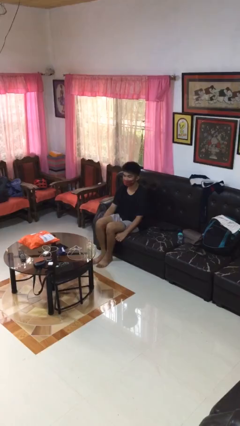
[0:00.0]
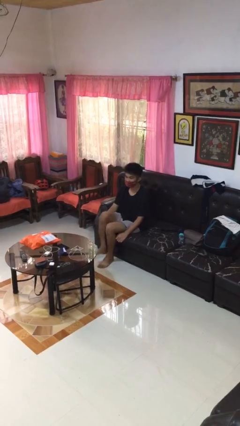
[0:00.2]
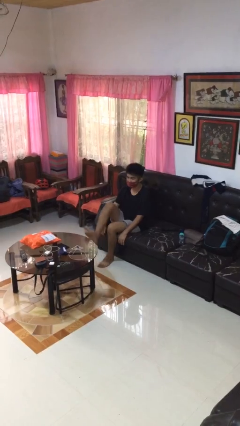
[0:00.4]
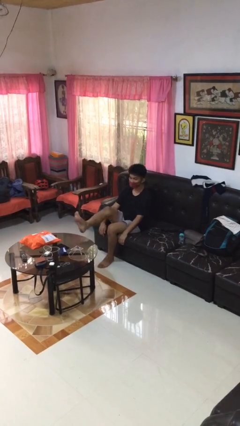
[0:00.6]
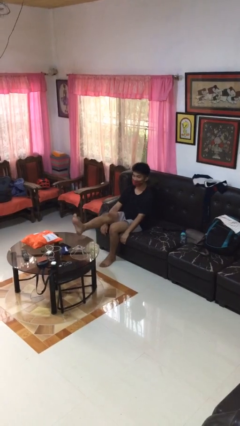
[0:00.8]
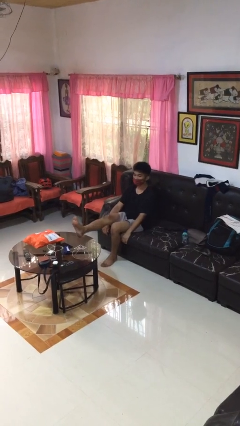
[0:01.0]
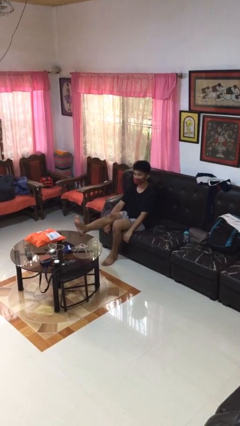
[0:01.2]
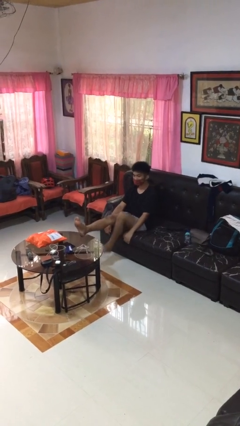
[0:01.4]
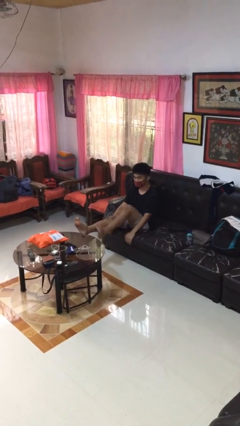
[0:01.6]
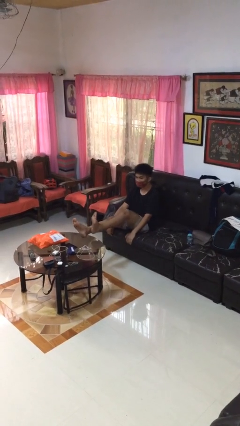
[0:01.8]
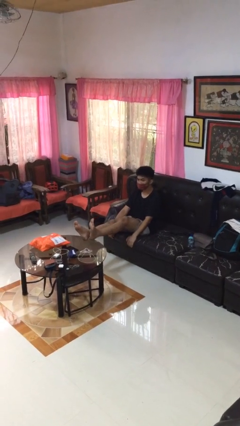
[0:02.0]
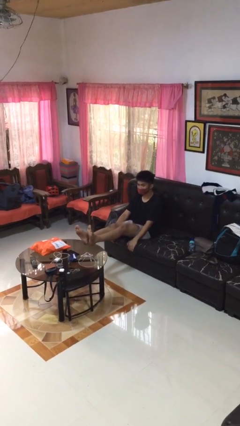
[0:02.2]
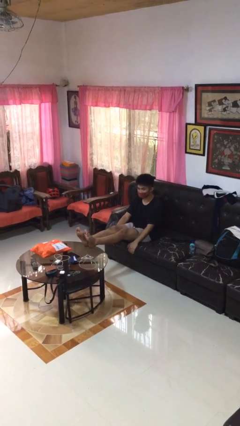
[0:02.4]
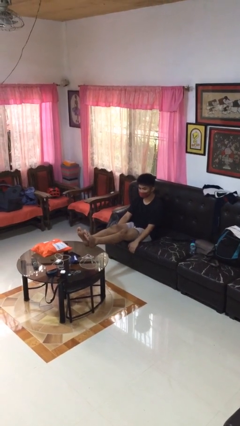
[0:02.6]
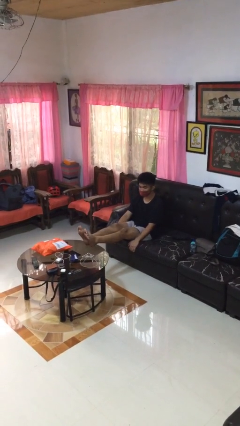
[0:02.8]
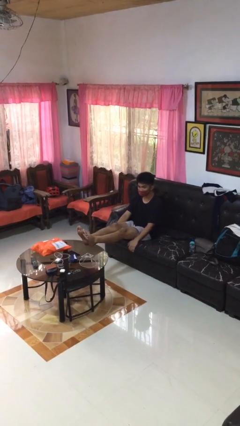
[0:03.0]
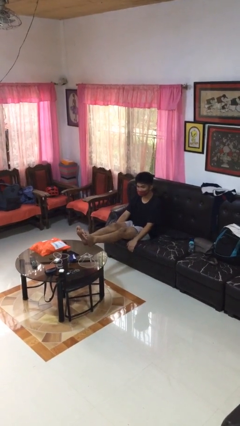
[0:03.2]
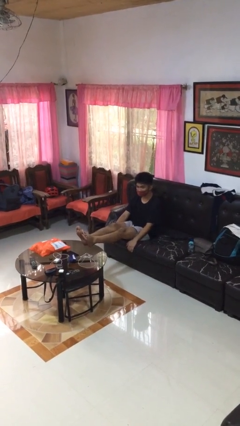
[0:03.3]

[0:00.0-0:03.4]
person puts feet up

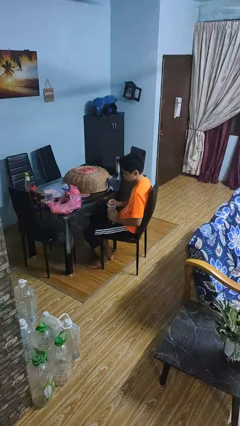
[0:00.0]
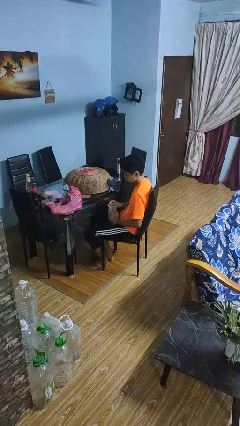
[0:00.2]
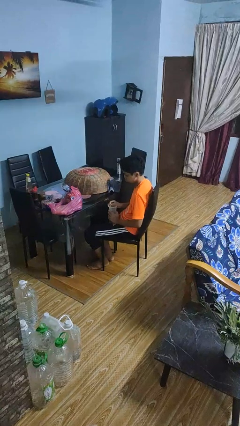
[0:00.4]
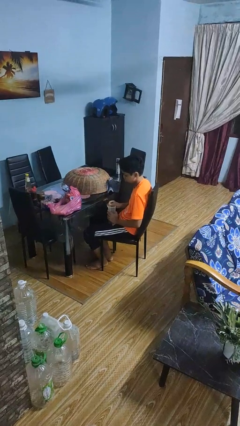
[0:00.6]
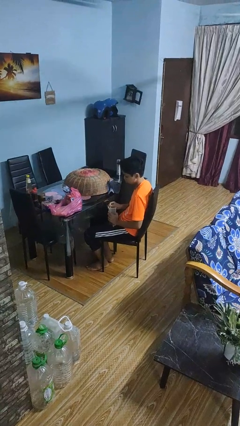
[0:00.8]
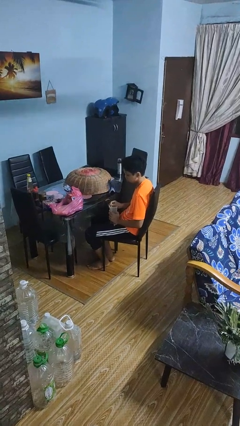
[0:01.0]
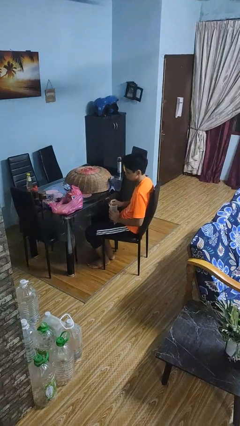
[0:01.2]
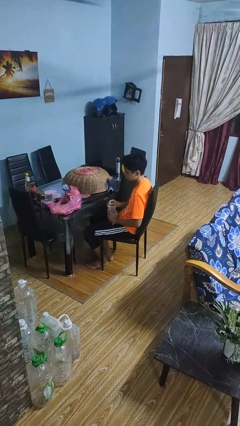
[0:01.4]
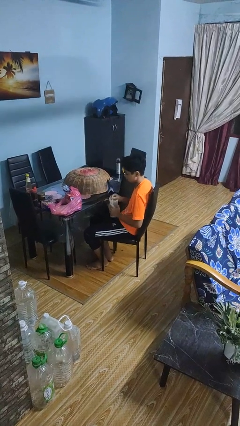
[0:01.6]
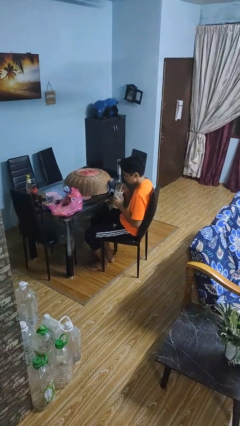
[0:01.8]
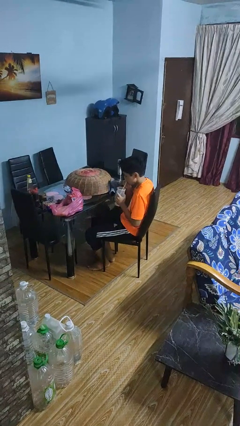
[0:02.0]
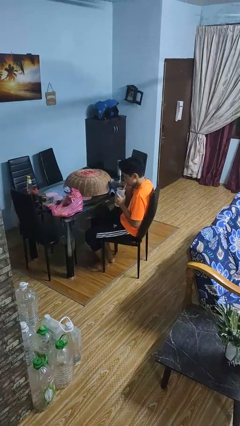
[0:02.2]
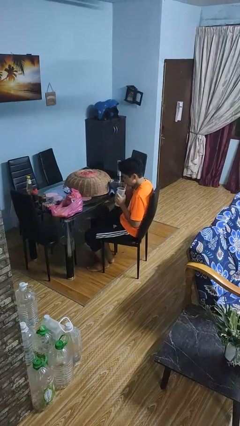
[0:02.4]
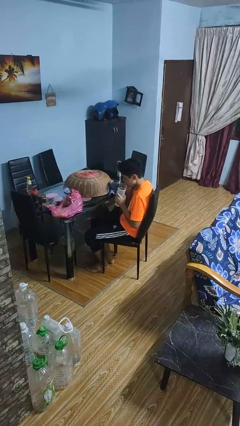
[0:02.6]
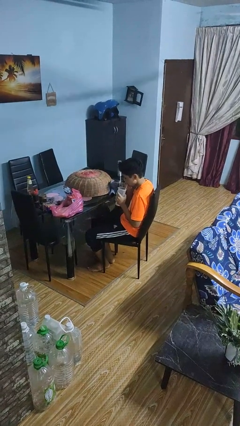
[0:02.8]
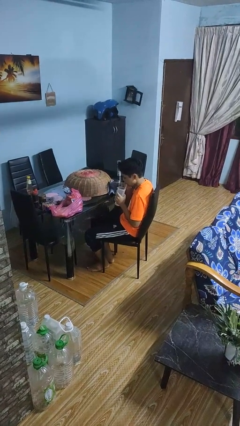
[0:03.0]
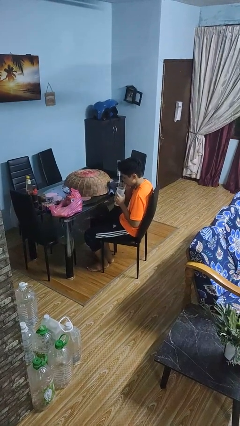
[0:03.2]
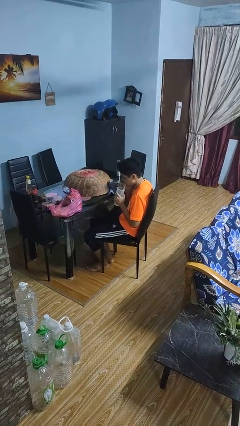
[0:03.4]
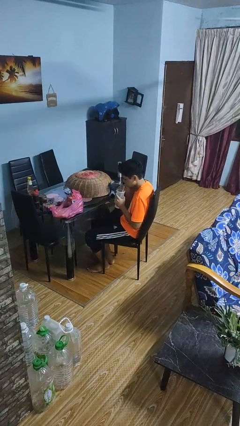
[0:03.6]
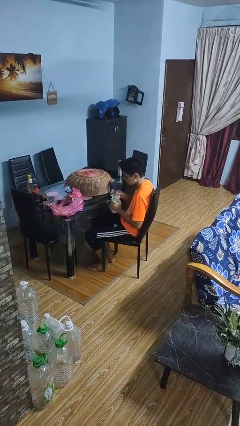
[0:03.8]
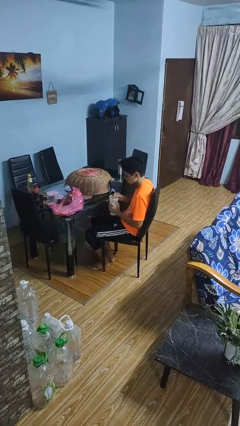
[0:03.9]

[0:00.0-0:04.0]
person drinks from straw

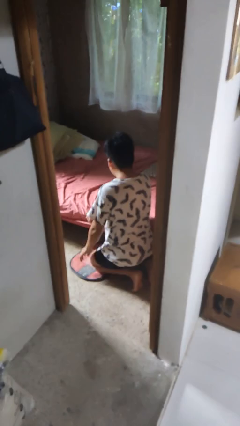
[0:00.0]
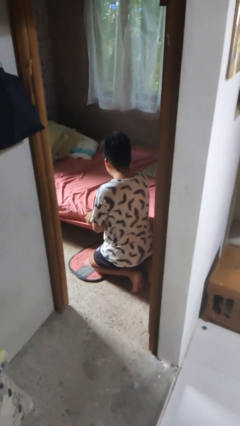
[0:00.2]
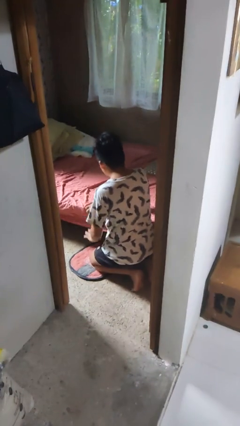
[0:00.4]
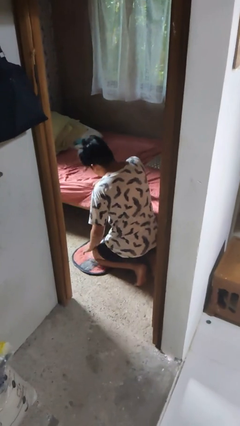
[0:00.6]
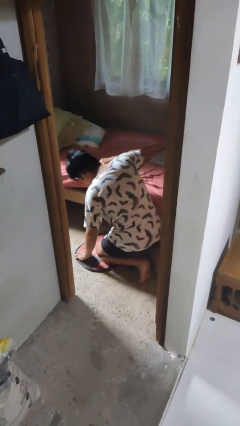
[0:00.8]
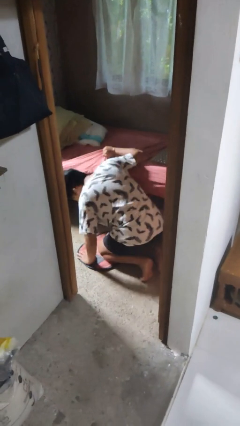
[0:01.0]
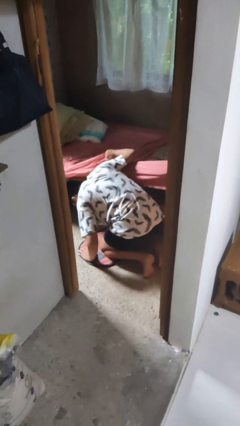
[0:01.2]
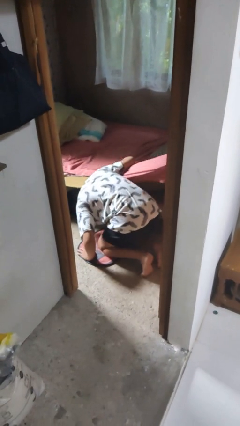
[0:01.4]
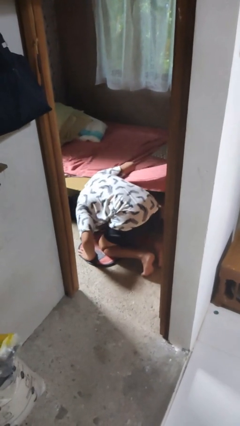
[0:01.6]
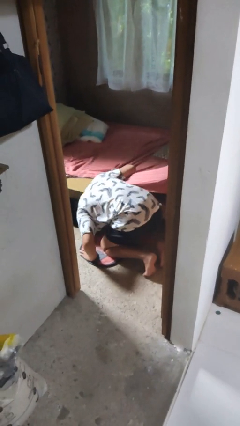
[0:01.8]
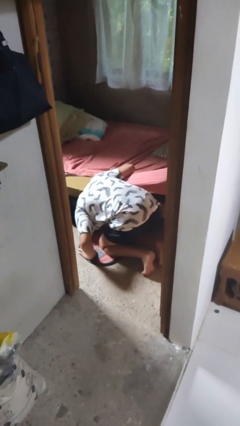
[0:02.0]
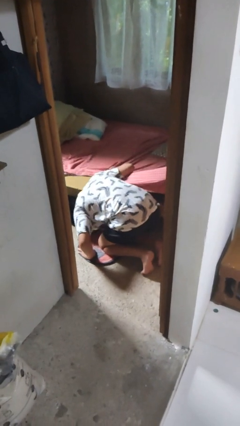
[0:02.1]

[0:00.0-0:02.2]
person searches under bed

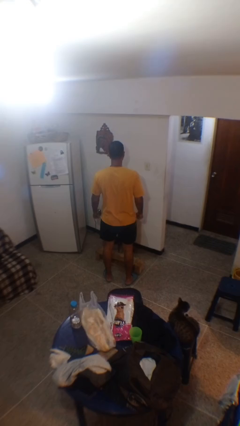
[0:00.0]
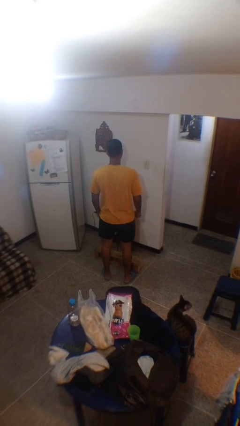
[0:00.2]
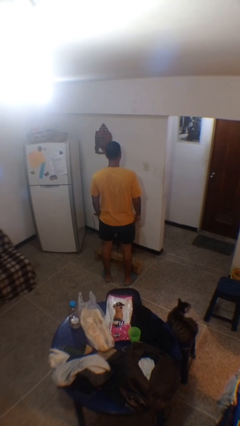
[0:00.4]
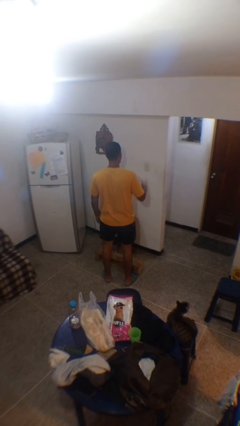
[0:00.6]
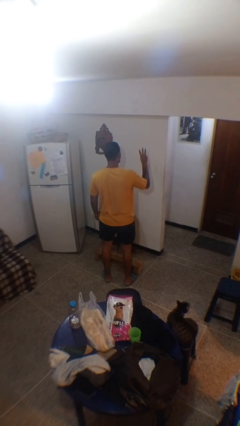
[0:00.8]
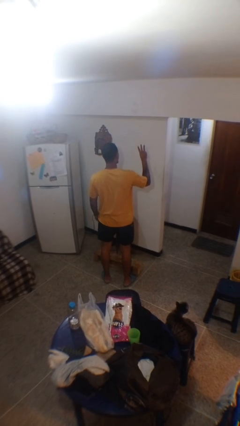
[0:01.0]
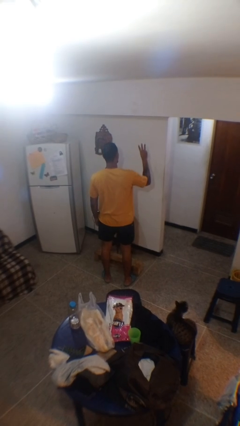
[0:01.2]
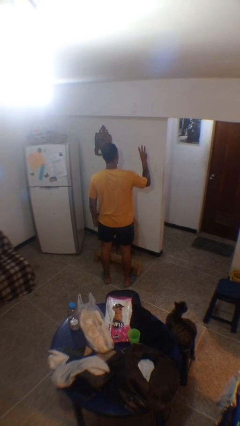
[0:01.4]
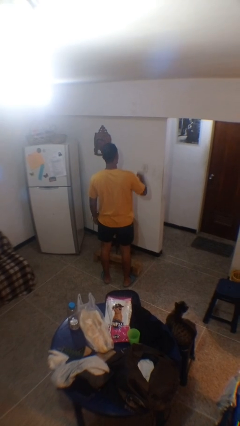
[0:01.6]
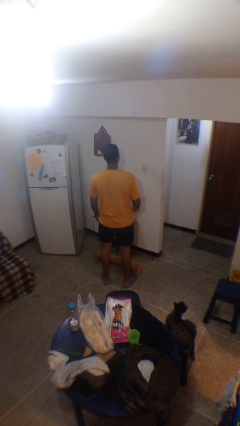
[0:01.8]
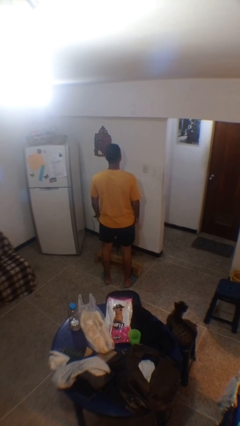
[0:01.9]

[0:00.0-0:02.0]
person gestures number three

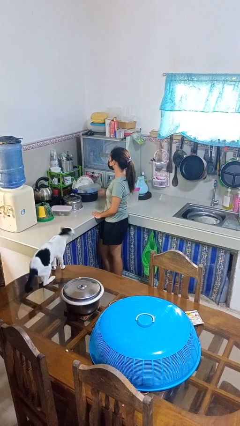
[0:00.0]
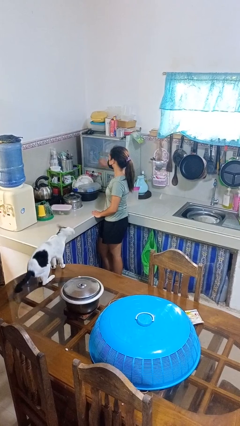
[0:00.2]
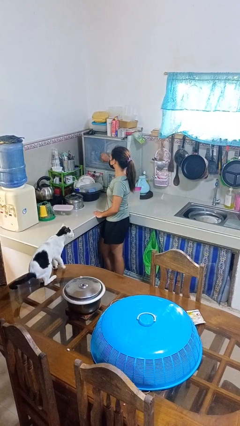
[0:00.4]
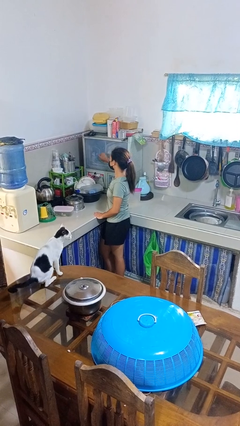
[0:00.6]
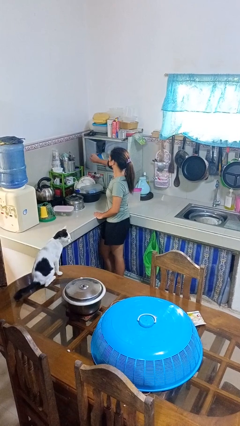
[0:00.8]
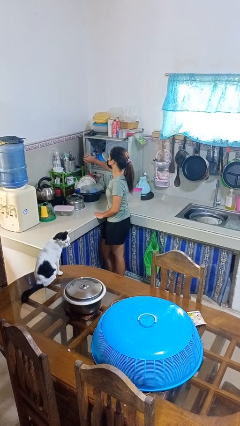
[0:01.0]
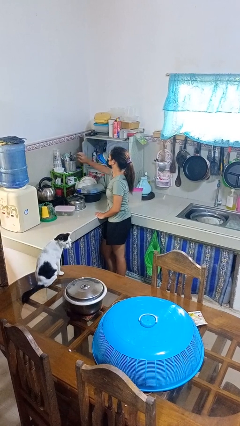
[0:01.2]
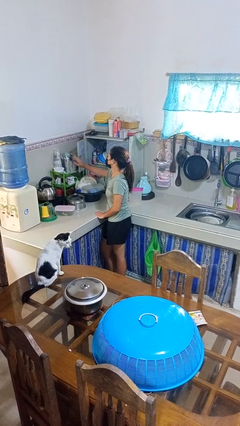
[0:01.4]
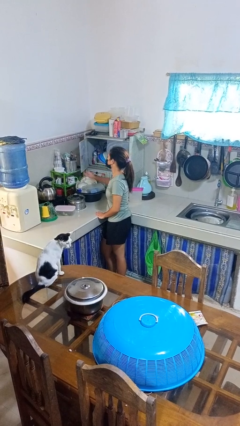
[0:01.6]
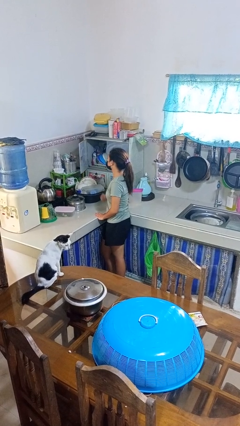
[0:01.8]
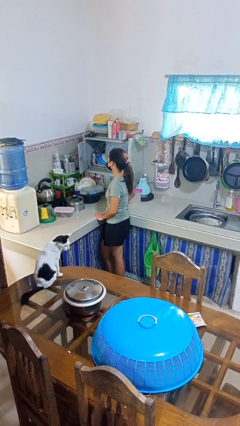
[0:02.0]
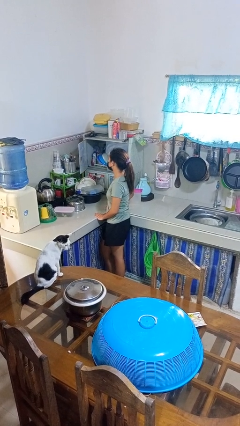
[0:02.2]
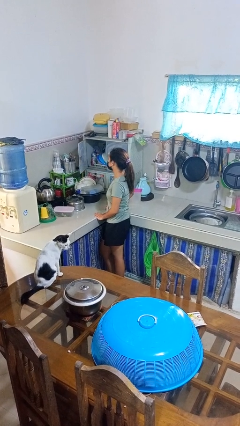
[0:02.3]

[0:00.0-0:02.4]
person opens kitchen drawer

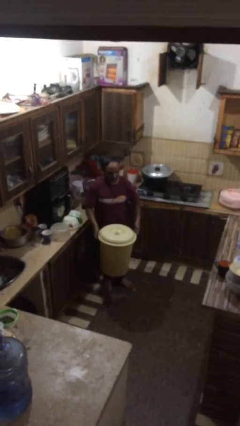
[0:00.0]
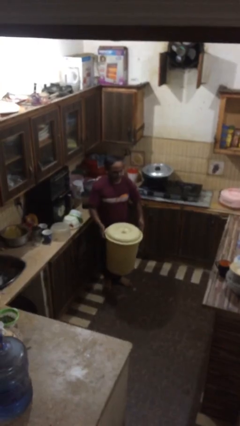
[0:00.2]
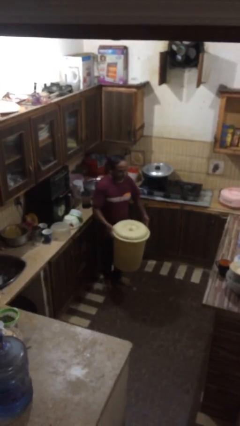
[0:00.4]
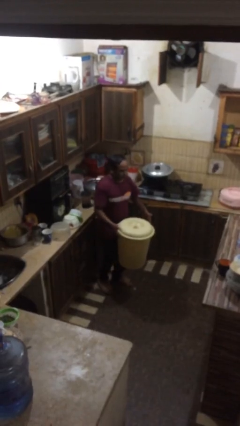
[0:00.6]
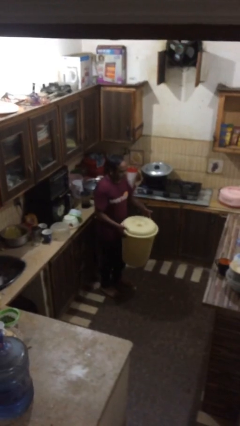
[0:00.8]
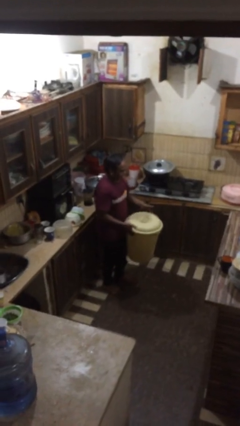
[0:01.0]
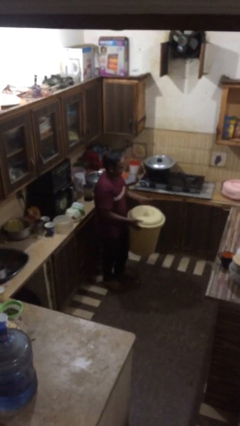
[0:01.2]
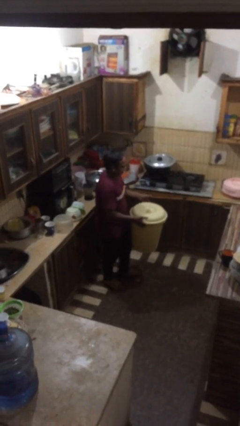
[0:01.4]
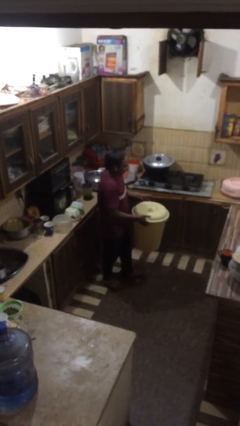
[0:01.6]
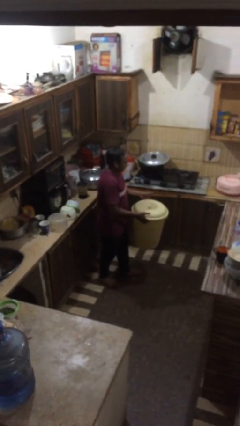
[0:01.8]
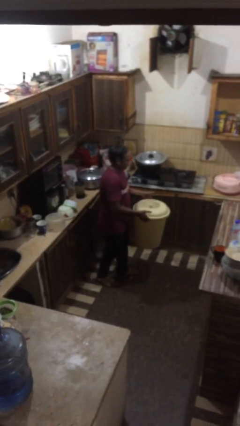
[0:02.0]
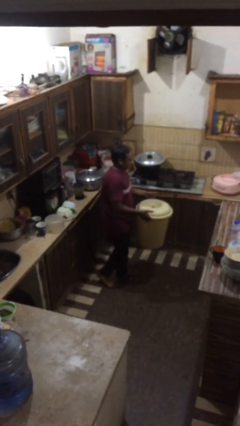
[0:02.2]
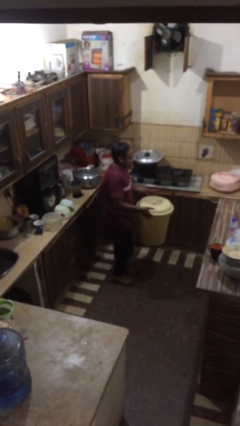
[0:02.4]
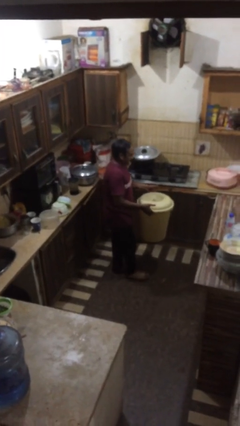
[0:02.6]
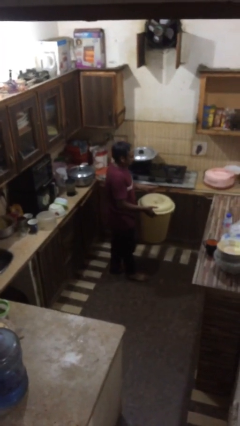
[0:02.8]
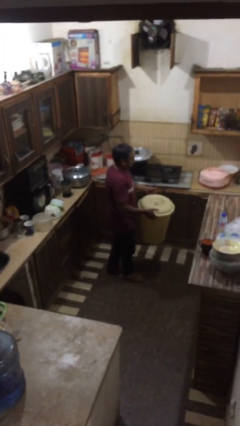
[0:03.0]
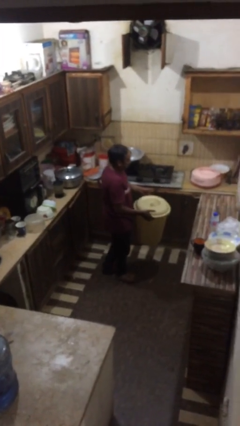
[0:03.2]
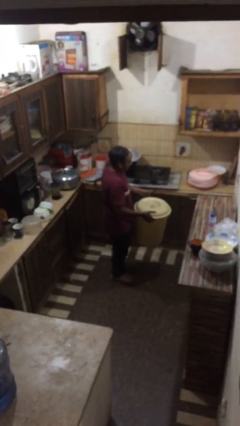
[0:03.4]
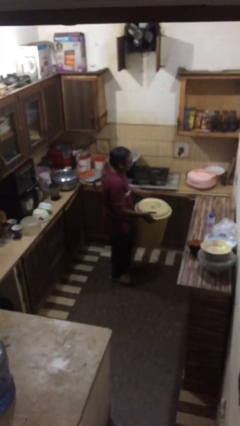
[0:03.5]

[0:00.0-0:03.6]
person carries heavy object

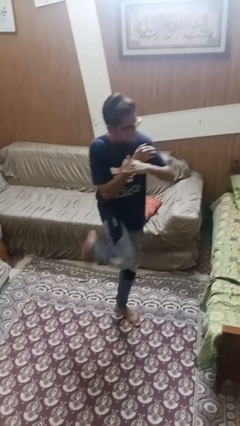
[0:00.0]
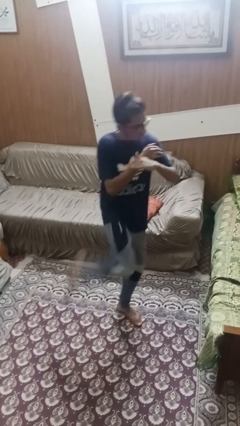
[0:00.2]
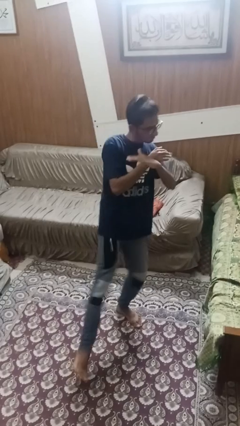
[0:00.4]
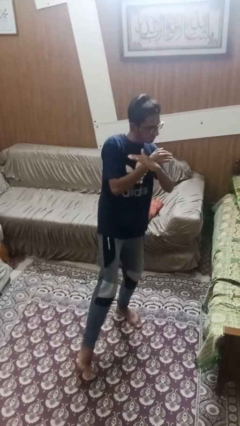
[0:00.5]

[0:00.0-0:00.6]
person karate kicks
